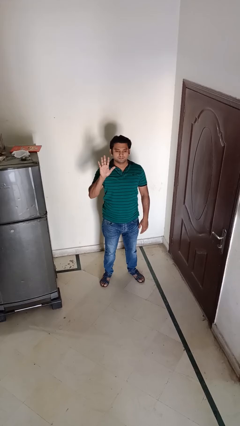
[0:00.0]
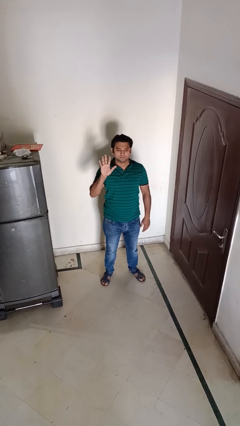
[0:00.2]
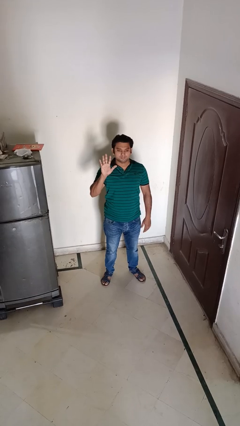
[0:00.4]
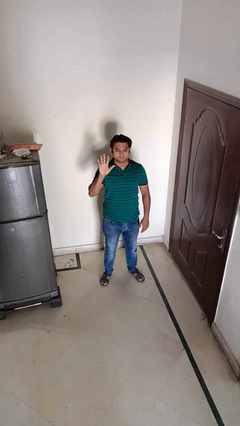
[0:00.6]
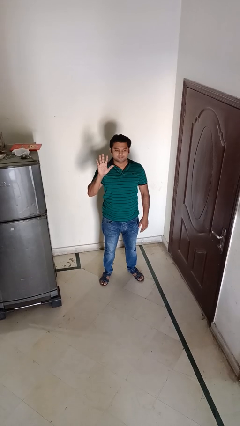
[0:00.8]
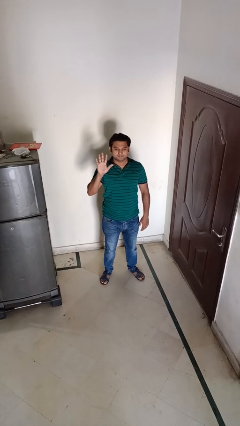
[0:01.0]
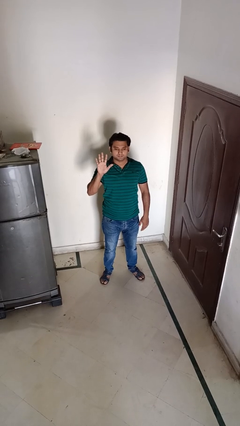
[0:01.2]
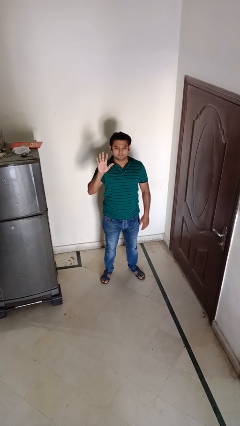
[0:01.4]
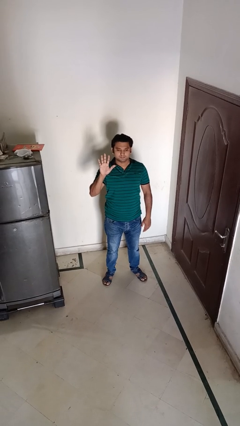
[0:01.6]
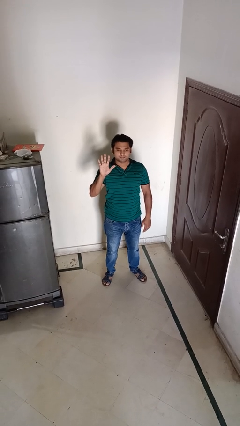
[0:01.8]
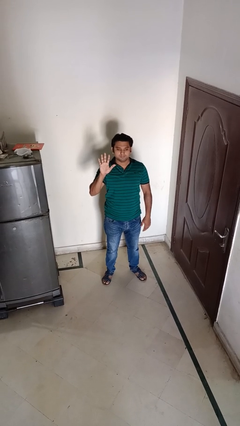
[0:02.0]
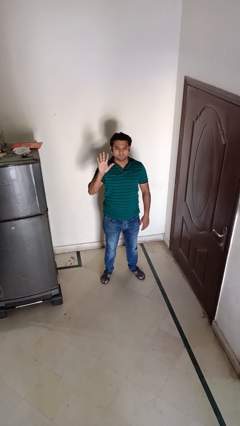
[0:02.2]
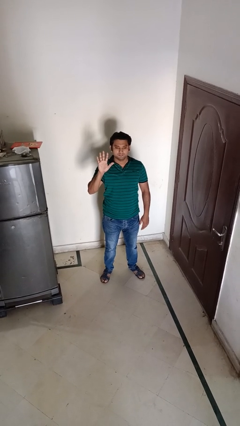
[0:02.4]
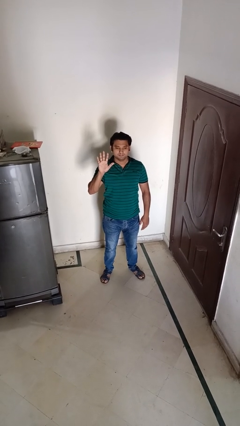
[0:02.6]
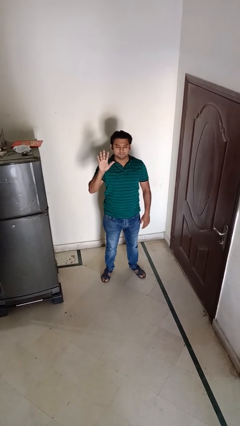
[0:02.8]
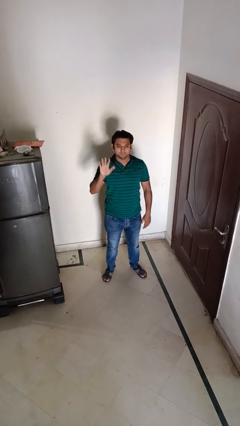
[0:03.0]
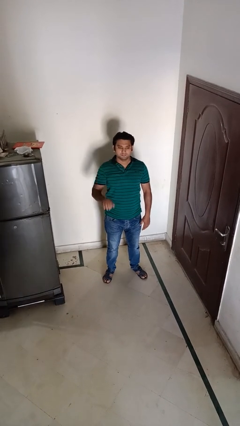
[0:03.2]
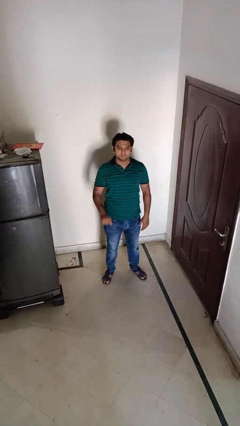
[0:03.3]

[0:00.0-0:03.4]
person gestures number five

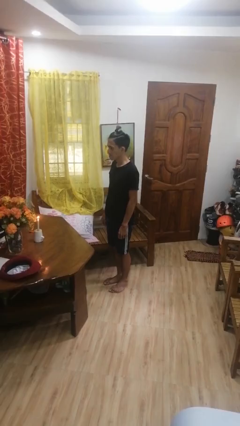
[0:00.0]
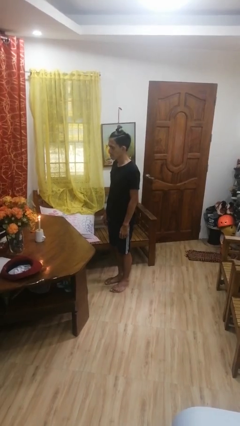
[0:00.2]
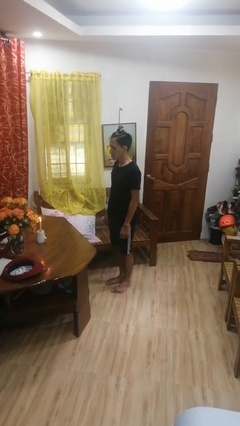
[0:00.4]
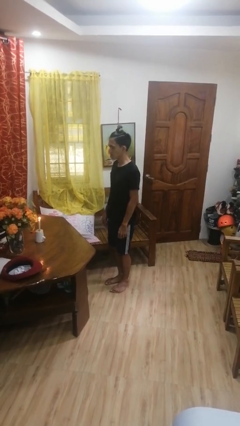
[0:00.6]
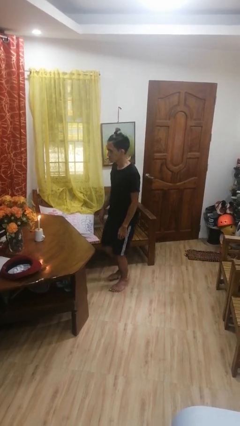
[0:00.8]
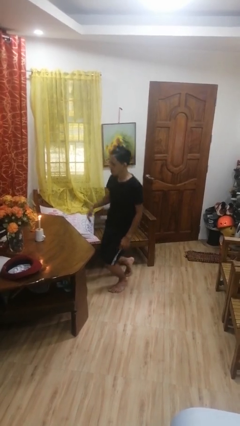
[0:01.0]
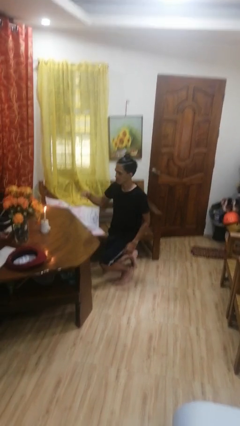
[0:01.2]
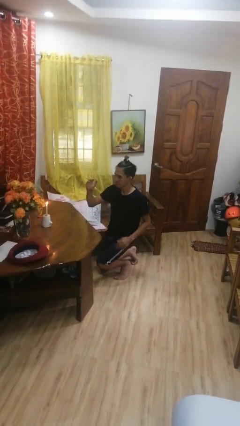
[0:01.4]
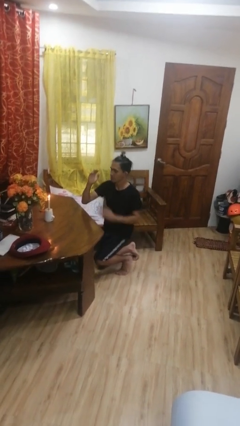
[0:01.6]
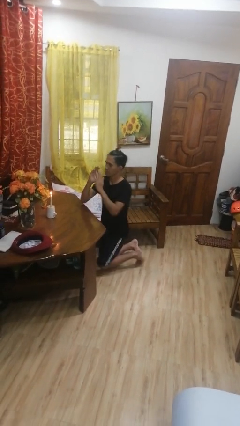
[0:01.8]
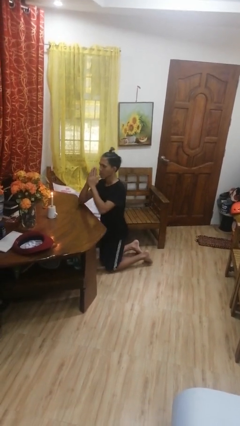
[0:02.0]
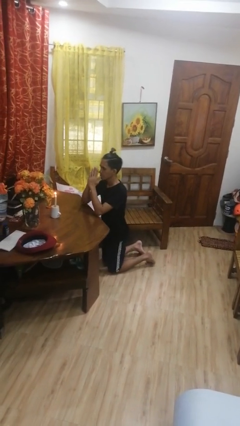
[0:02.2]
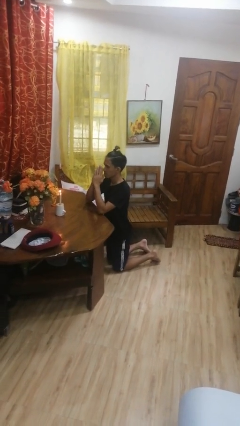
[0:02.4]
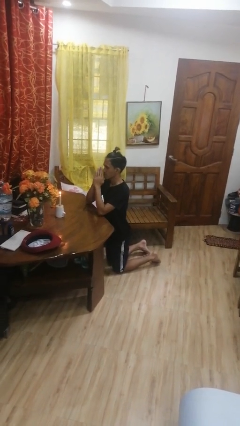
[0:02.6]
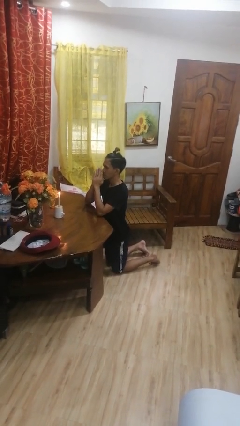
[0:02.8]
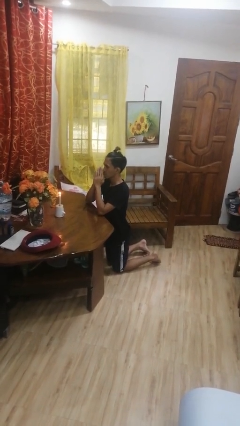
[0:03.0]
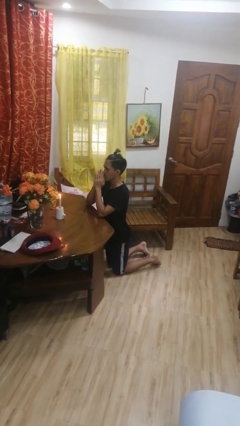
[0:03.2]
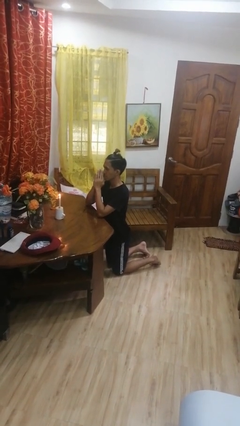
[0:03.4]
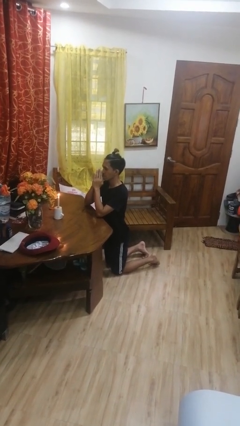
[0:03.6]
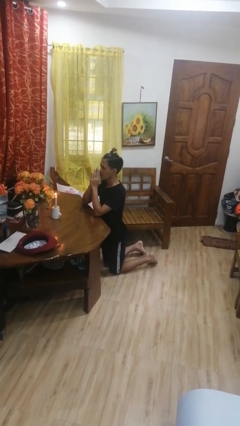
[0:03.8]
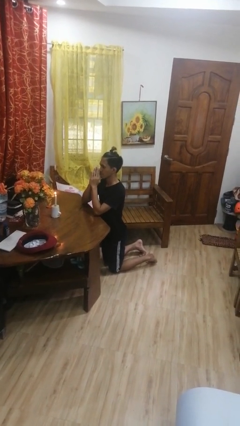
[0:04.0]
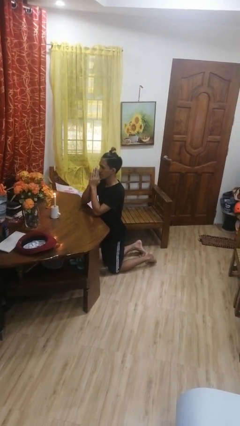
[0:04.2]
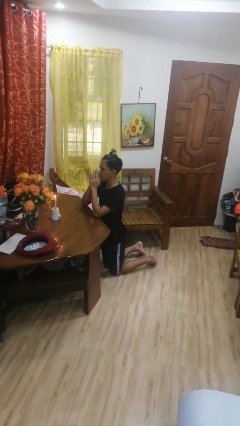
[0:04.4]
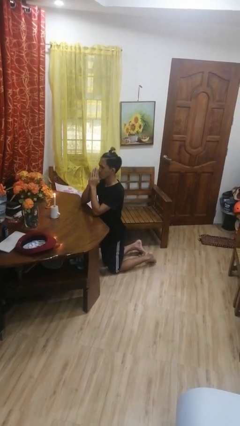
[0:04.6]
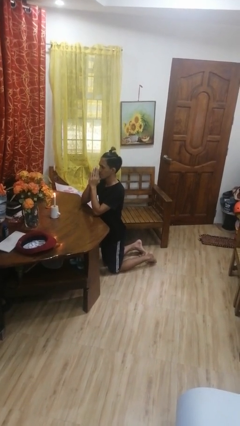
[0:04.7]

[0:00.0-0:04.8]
person prays

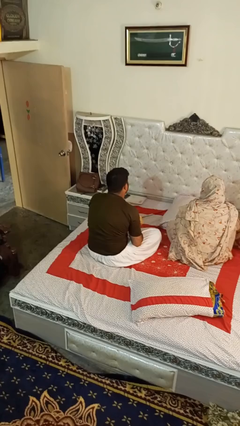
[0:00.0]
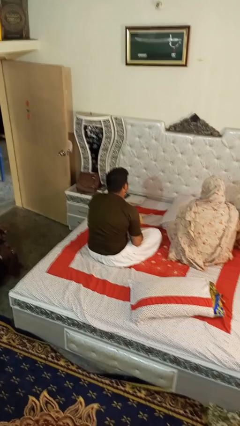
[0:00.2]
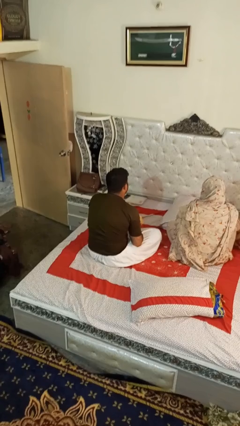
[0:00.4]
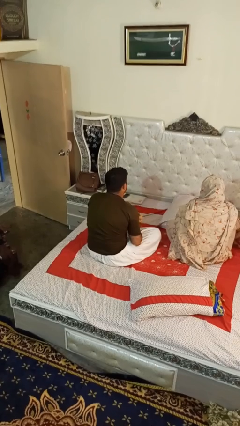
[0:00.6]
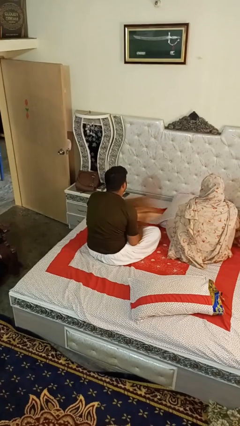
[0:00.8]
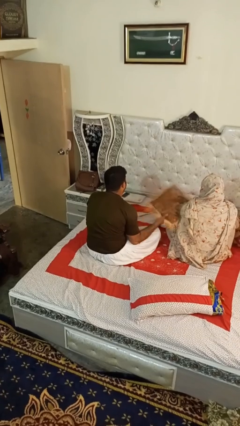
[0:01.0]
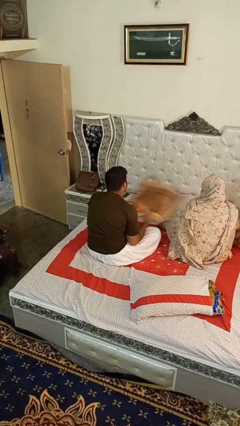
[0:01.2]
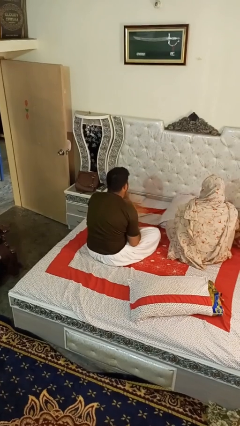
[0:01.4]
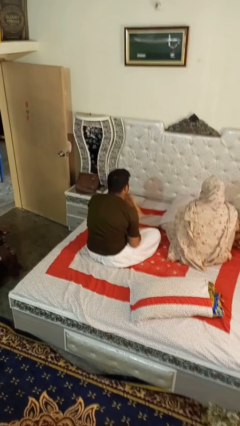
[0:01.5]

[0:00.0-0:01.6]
person hits person with pillow

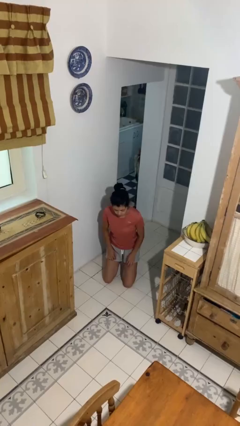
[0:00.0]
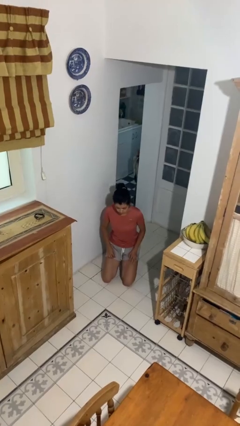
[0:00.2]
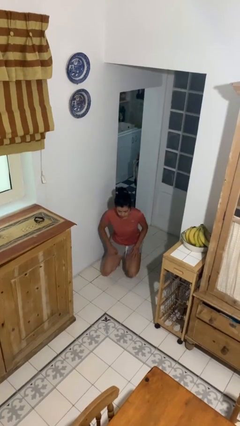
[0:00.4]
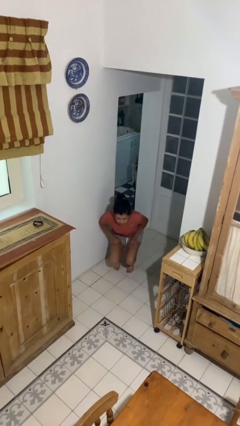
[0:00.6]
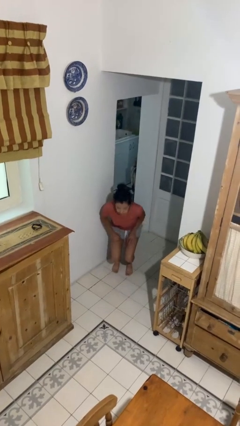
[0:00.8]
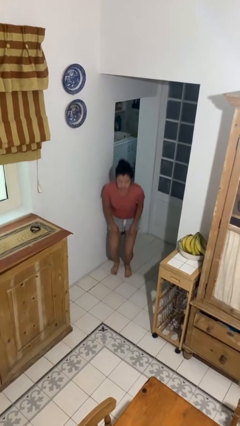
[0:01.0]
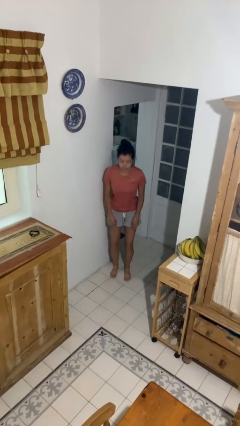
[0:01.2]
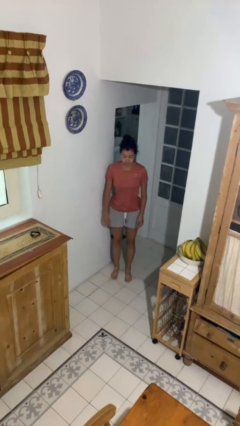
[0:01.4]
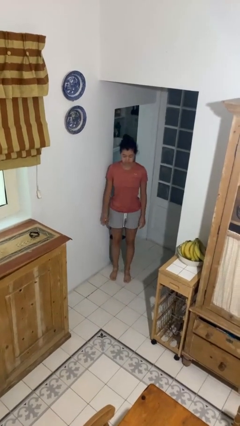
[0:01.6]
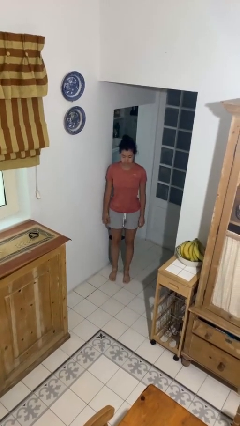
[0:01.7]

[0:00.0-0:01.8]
person stands up from floor

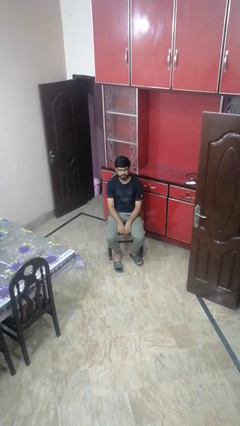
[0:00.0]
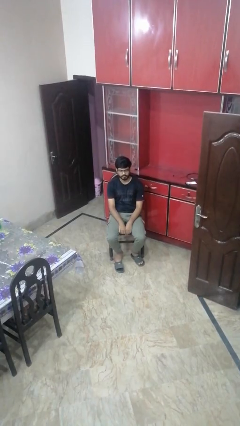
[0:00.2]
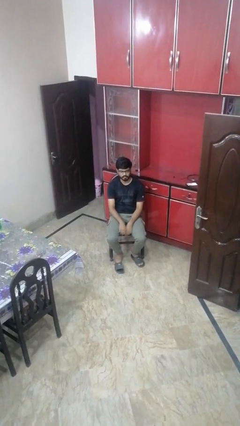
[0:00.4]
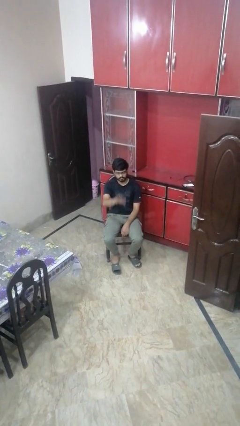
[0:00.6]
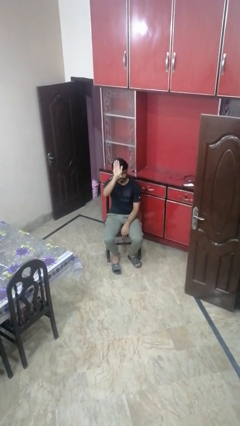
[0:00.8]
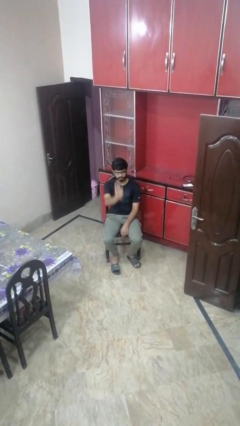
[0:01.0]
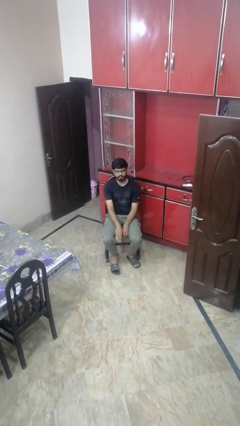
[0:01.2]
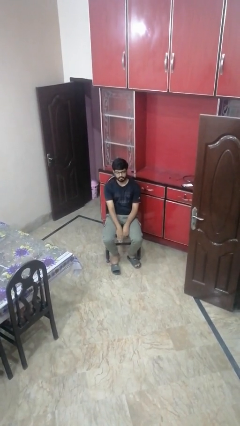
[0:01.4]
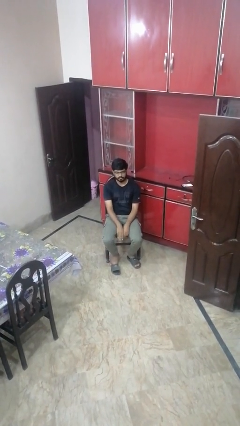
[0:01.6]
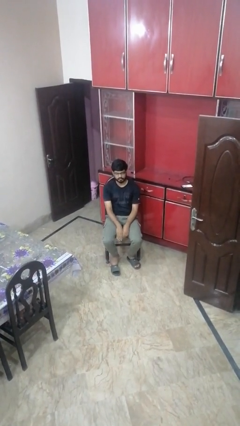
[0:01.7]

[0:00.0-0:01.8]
person gestures swipe down

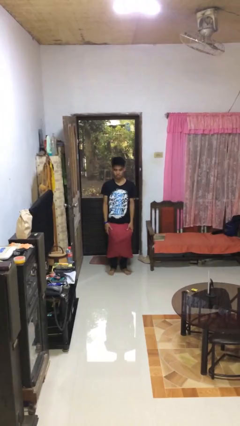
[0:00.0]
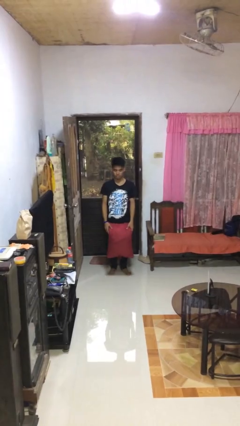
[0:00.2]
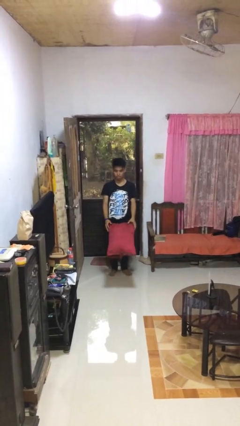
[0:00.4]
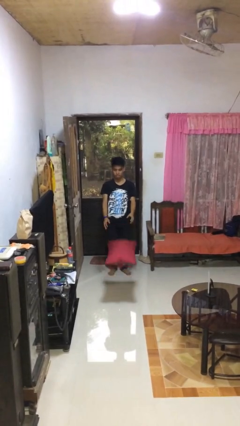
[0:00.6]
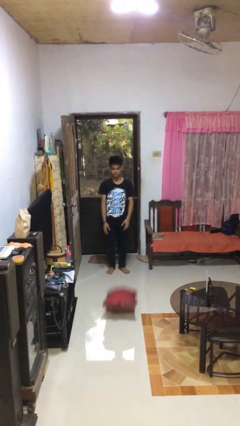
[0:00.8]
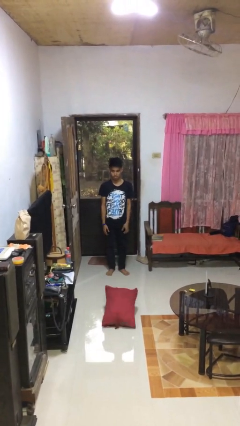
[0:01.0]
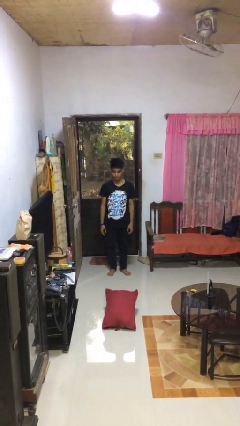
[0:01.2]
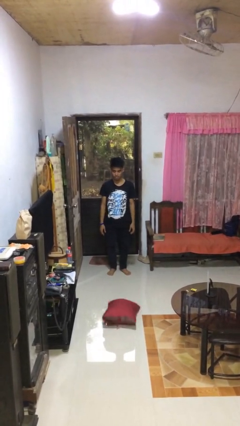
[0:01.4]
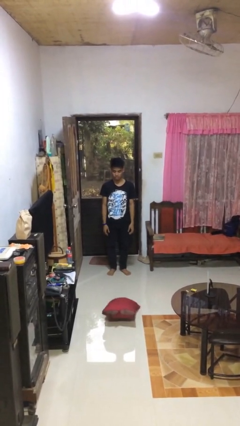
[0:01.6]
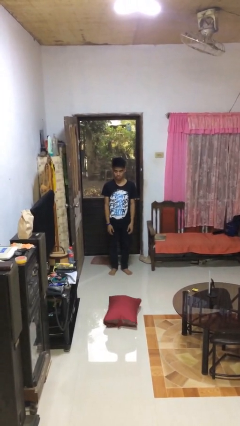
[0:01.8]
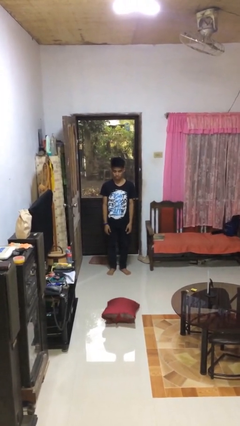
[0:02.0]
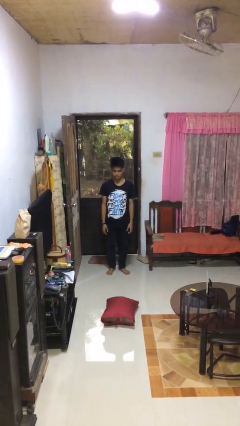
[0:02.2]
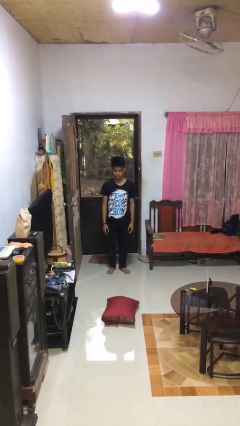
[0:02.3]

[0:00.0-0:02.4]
person throws object to ground

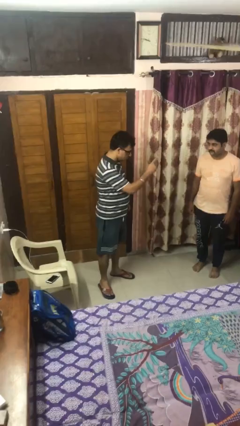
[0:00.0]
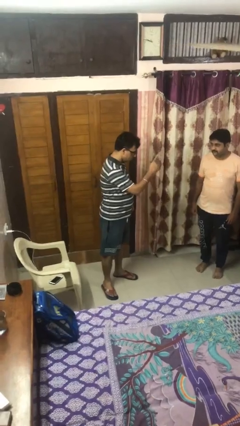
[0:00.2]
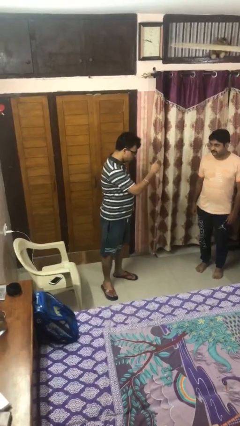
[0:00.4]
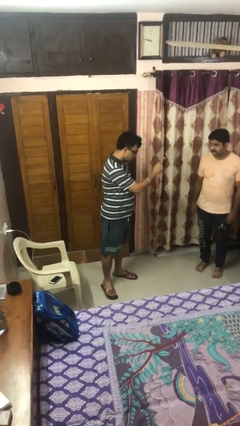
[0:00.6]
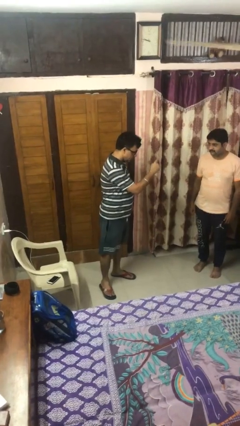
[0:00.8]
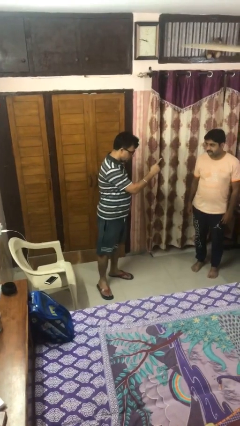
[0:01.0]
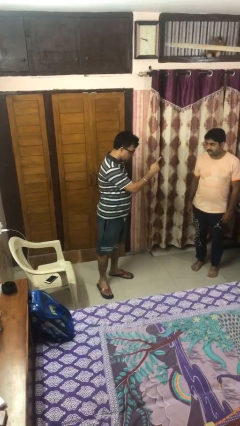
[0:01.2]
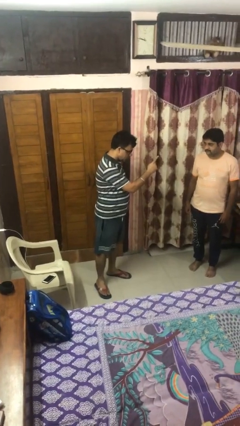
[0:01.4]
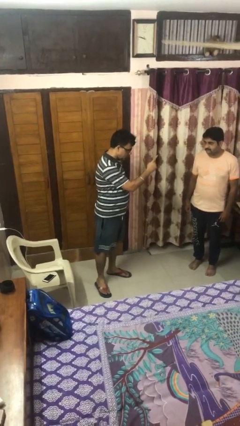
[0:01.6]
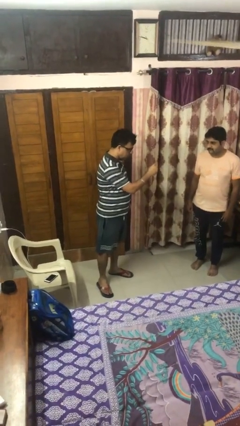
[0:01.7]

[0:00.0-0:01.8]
person points at person
